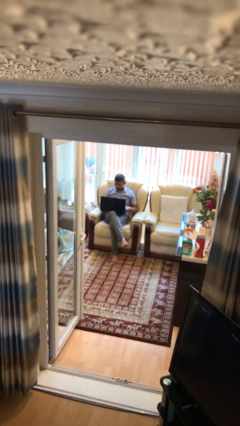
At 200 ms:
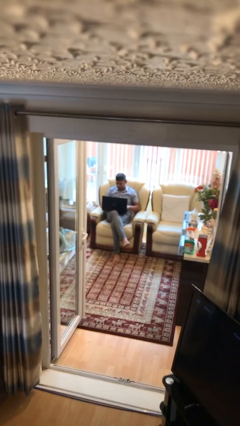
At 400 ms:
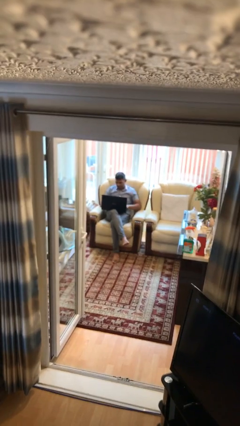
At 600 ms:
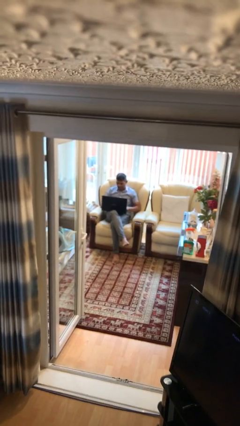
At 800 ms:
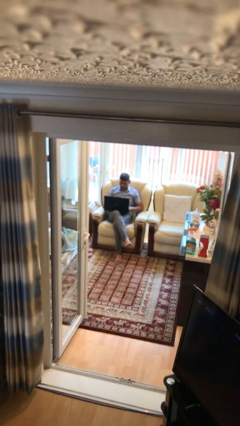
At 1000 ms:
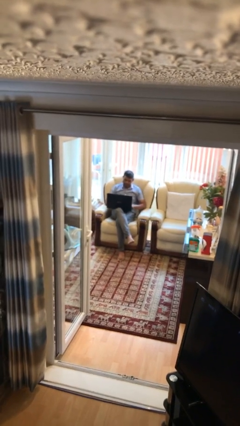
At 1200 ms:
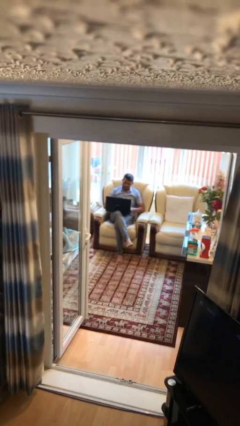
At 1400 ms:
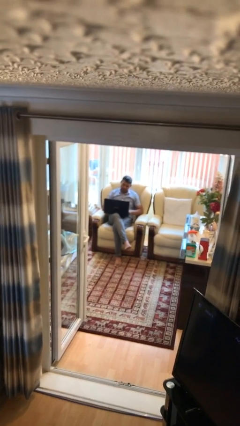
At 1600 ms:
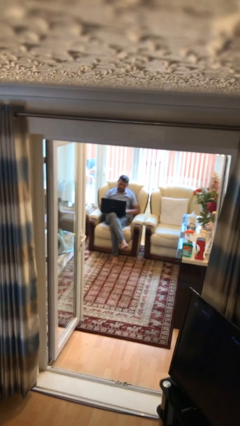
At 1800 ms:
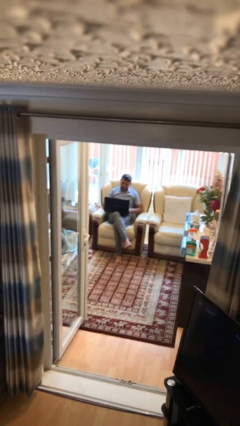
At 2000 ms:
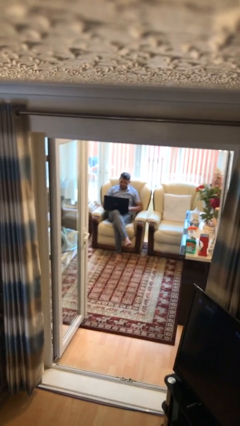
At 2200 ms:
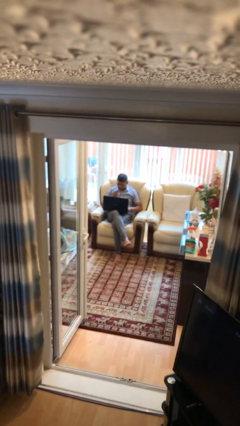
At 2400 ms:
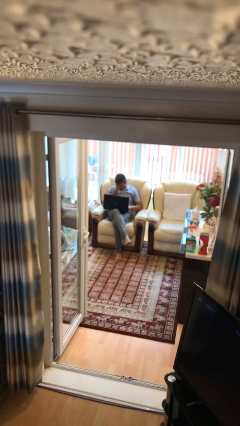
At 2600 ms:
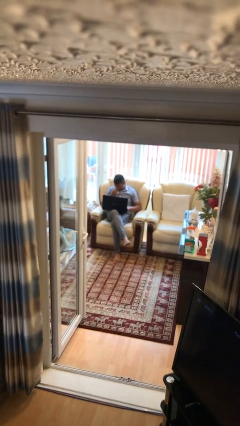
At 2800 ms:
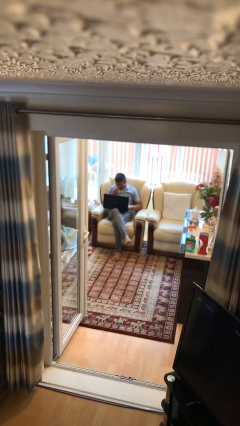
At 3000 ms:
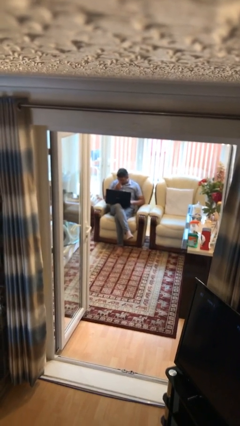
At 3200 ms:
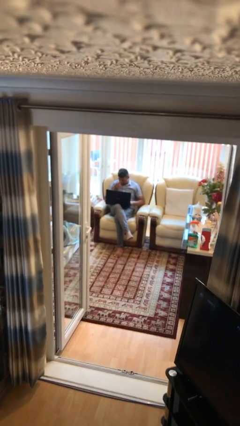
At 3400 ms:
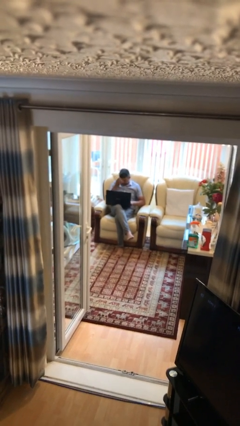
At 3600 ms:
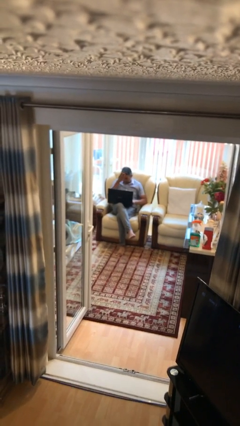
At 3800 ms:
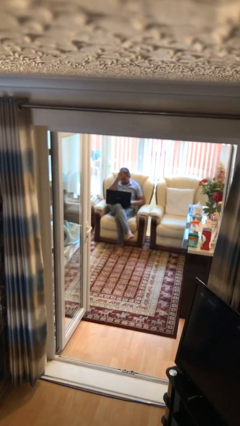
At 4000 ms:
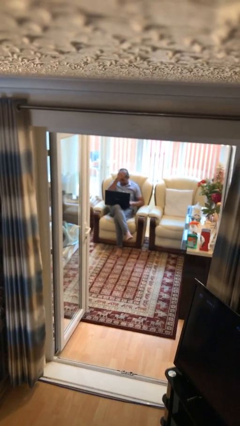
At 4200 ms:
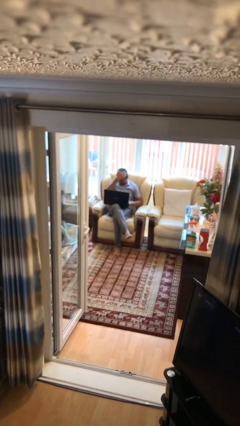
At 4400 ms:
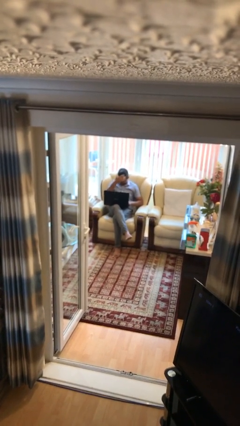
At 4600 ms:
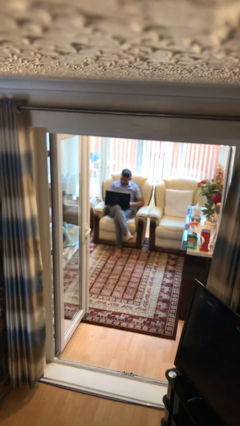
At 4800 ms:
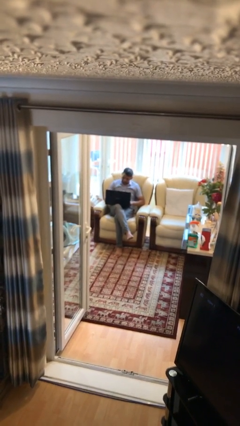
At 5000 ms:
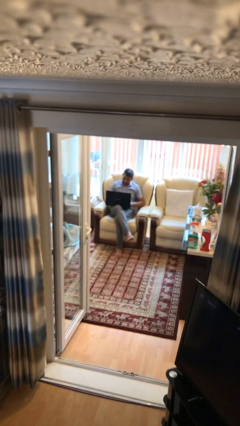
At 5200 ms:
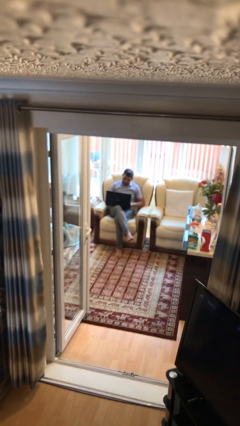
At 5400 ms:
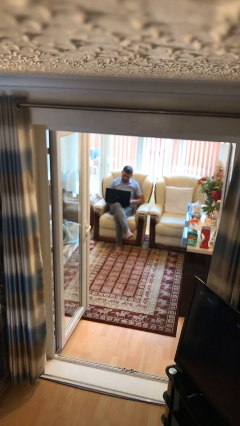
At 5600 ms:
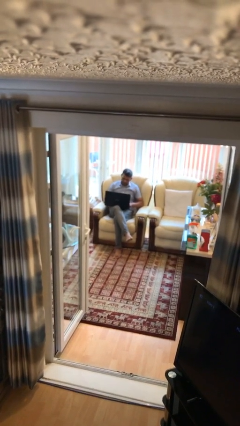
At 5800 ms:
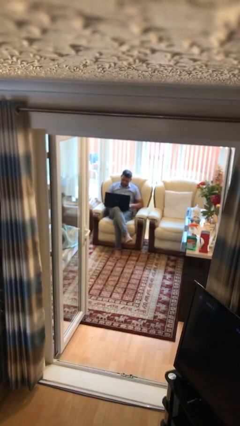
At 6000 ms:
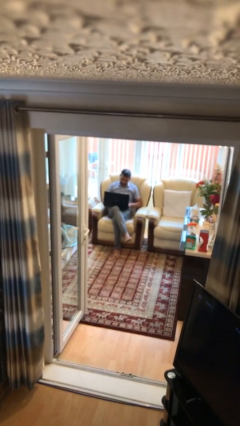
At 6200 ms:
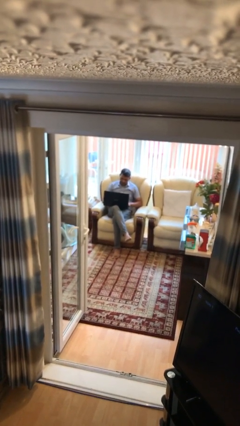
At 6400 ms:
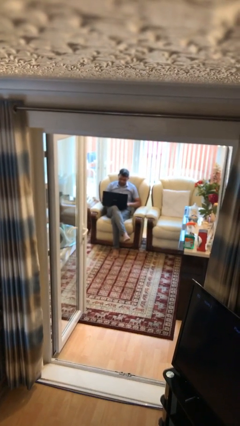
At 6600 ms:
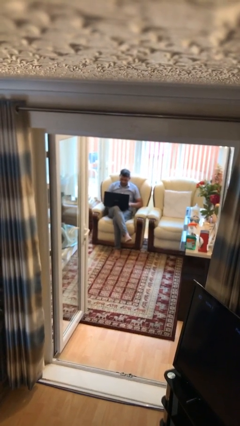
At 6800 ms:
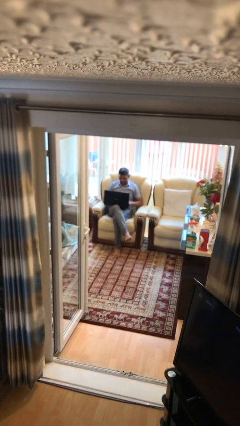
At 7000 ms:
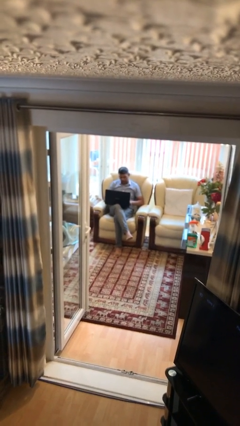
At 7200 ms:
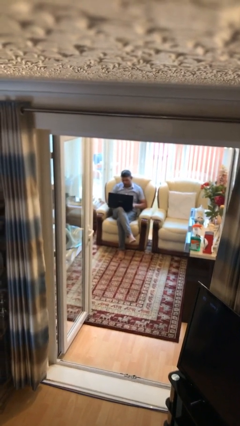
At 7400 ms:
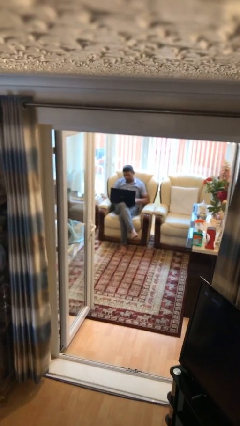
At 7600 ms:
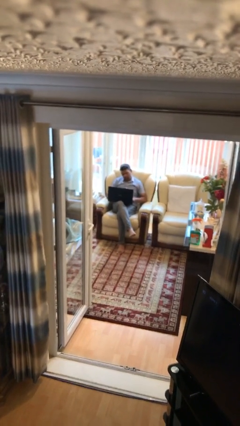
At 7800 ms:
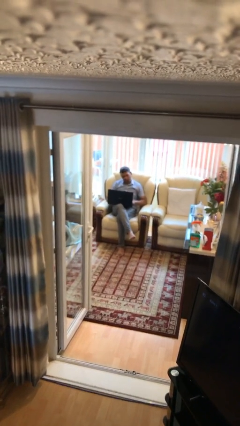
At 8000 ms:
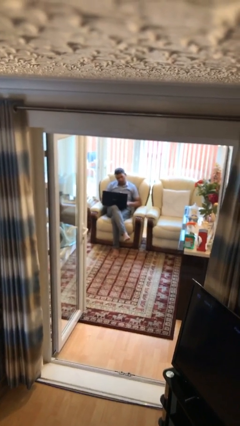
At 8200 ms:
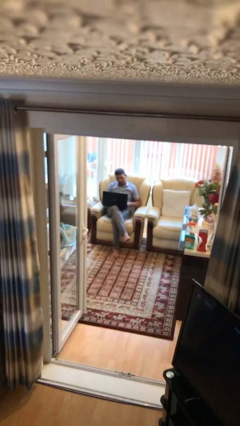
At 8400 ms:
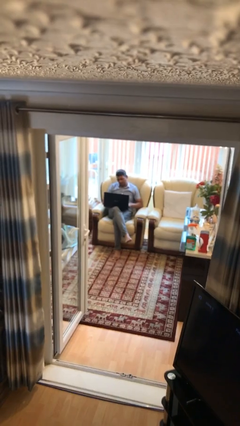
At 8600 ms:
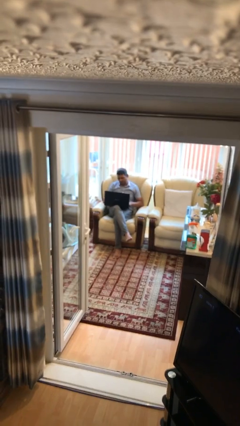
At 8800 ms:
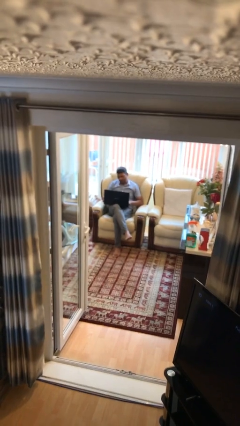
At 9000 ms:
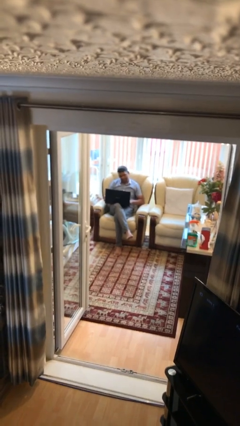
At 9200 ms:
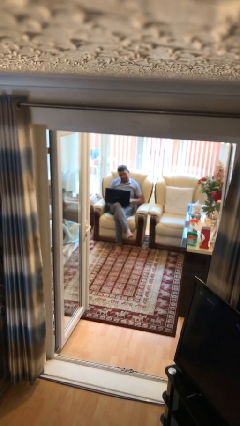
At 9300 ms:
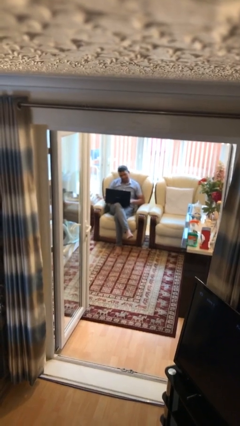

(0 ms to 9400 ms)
person interacts with laptop

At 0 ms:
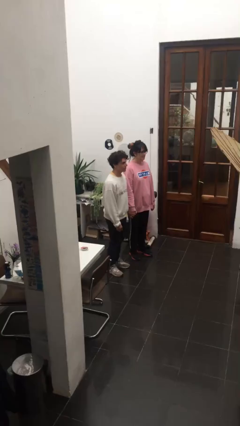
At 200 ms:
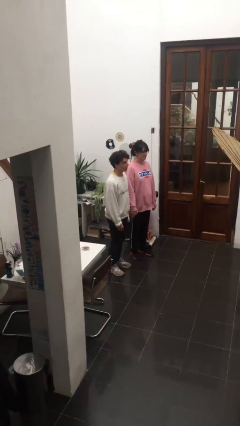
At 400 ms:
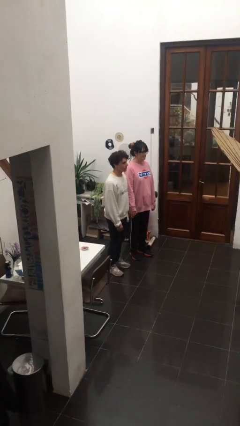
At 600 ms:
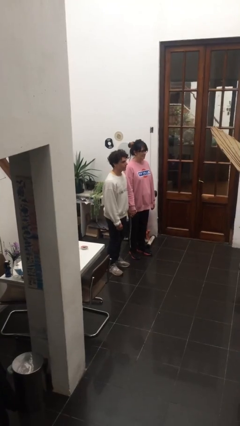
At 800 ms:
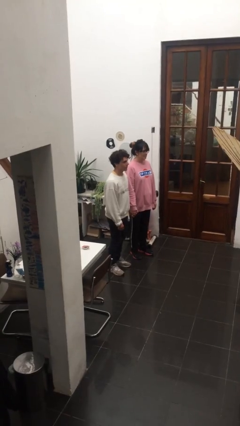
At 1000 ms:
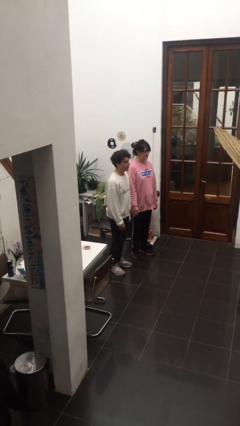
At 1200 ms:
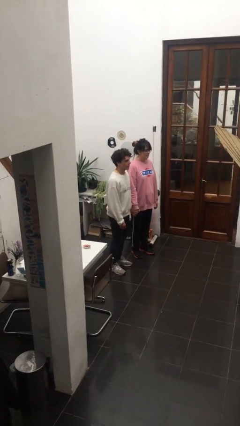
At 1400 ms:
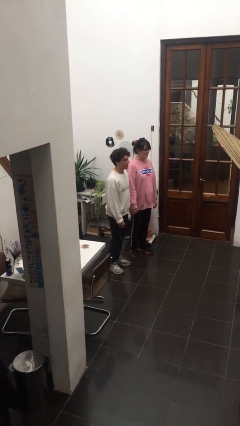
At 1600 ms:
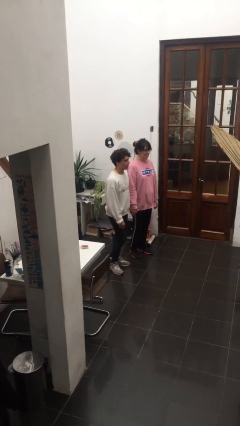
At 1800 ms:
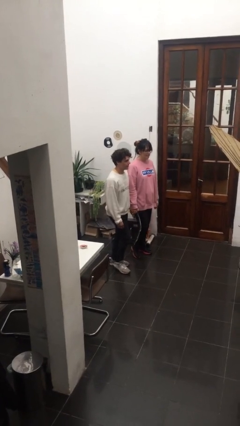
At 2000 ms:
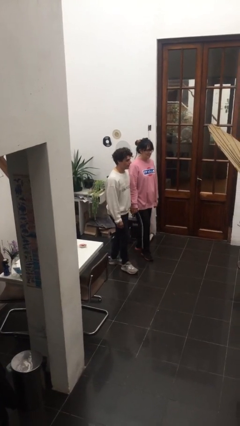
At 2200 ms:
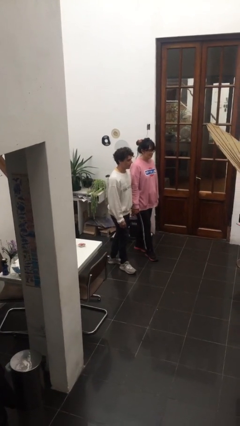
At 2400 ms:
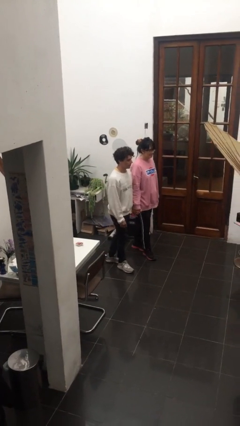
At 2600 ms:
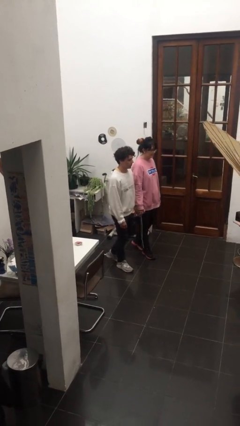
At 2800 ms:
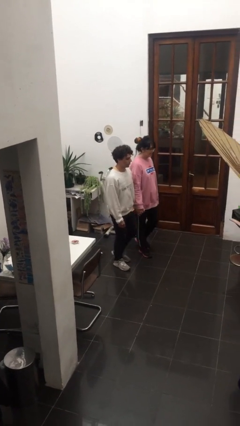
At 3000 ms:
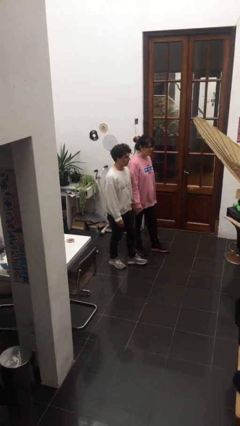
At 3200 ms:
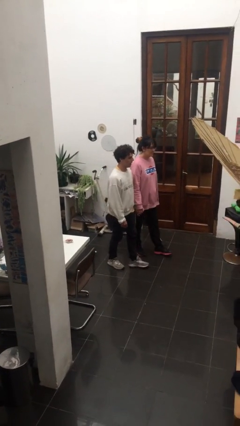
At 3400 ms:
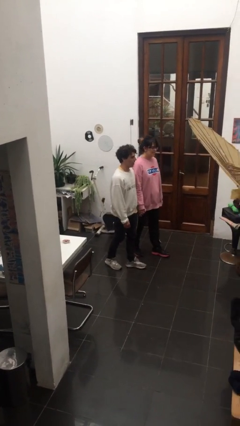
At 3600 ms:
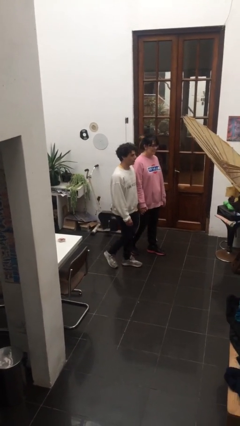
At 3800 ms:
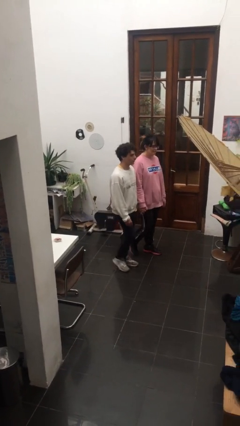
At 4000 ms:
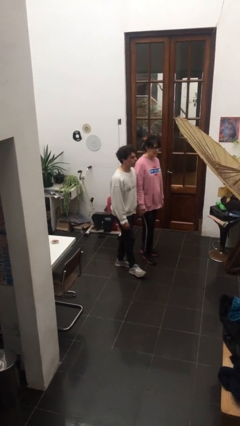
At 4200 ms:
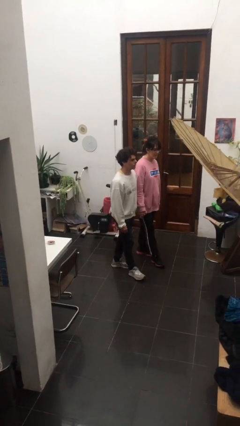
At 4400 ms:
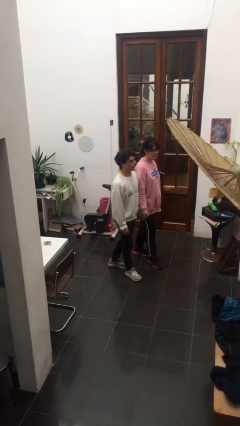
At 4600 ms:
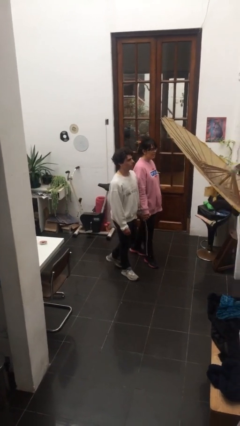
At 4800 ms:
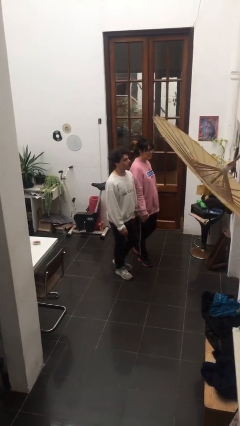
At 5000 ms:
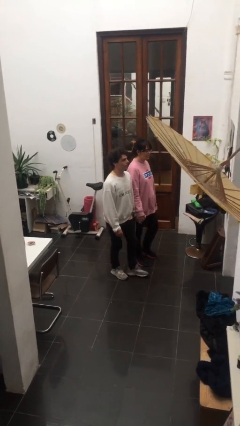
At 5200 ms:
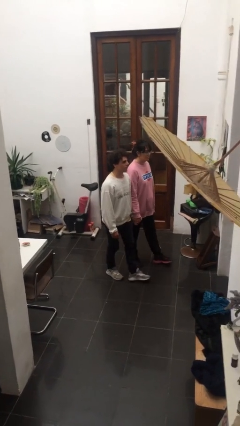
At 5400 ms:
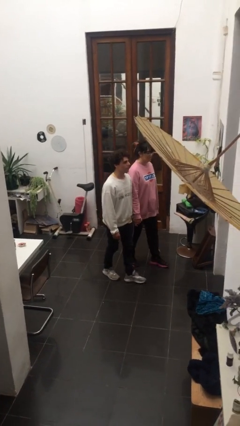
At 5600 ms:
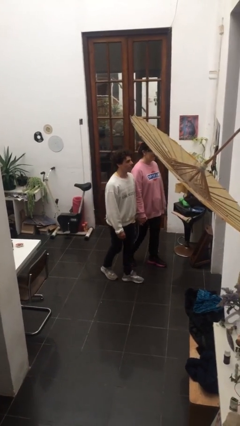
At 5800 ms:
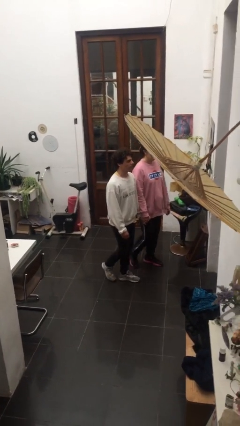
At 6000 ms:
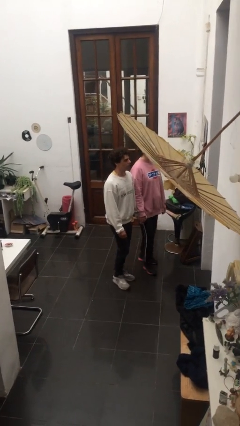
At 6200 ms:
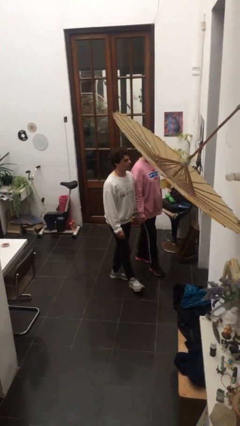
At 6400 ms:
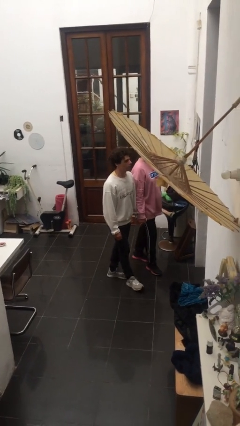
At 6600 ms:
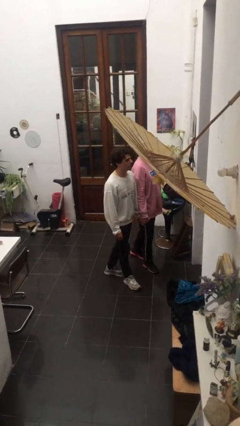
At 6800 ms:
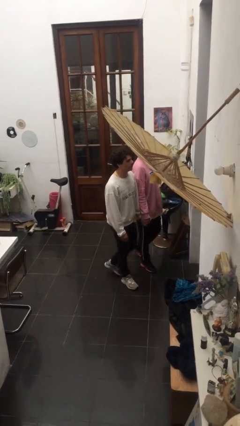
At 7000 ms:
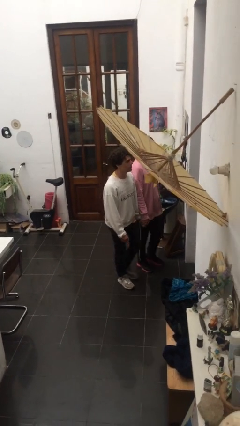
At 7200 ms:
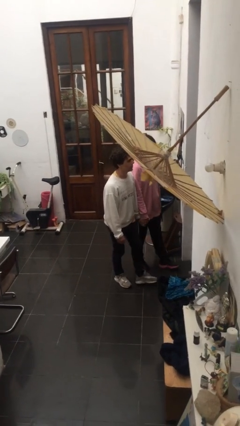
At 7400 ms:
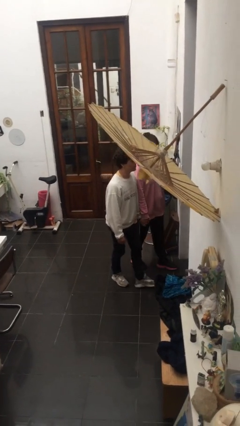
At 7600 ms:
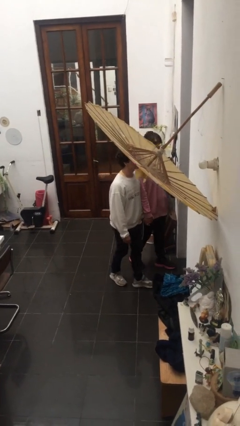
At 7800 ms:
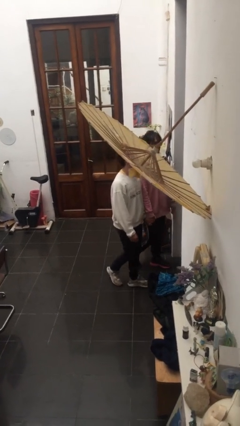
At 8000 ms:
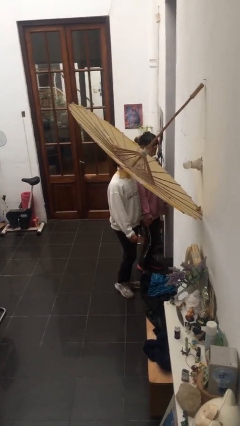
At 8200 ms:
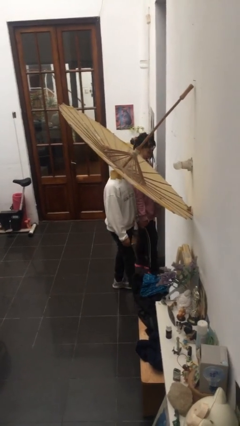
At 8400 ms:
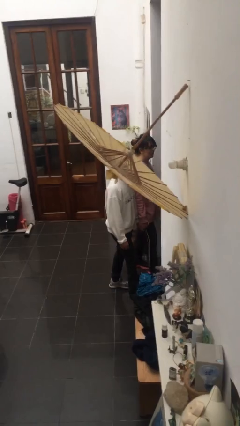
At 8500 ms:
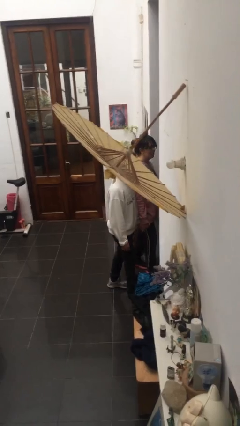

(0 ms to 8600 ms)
person holds hand
